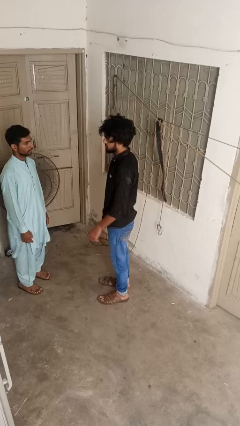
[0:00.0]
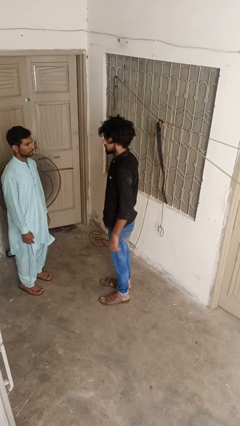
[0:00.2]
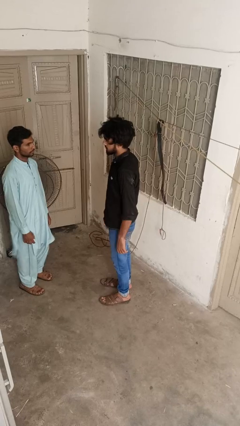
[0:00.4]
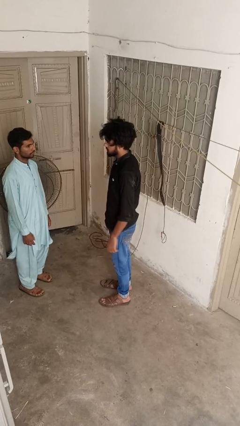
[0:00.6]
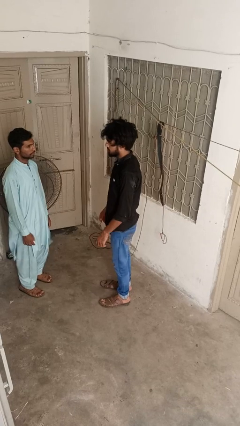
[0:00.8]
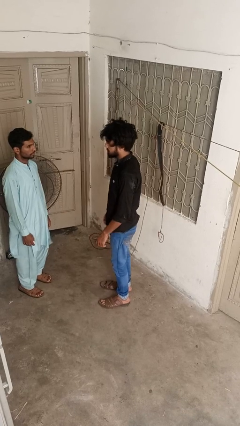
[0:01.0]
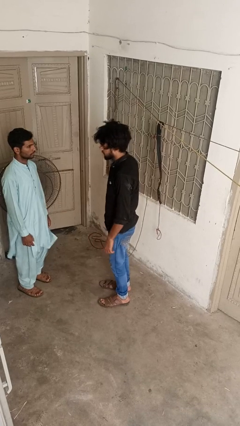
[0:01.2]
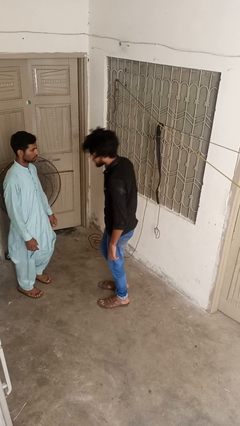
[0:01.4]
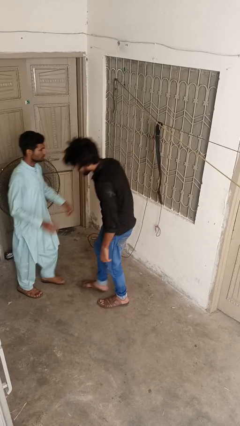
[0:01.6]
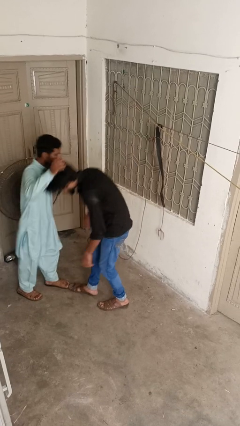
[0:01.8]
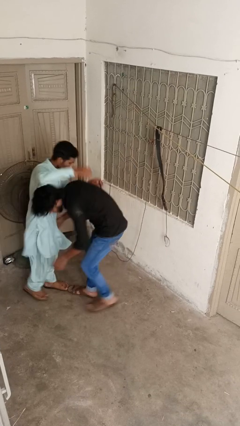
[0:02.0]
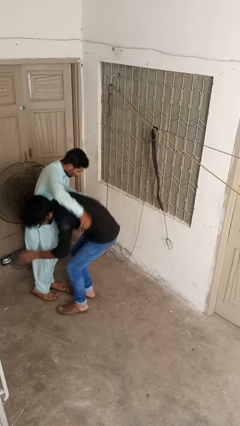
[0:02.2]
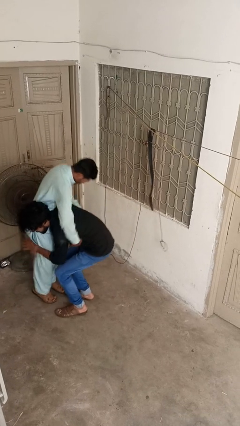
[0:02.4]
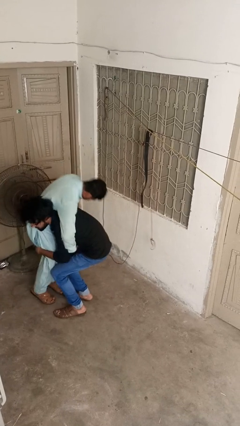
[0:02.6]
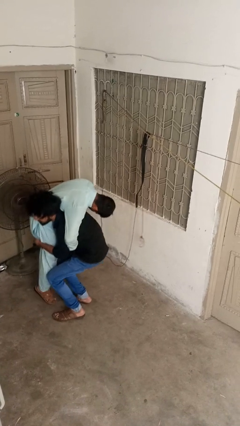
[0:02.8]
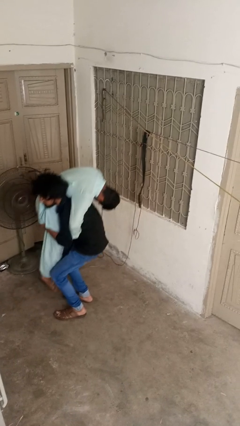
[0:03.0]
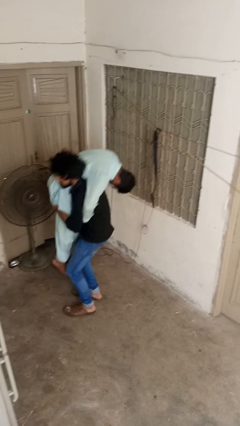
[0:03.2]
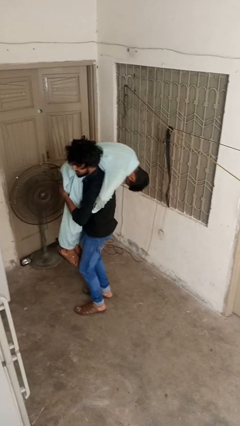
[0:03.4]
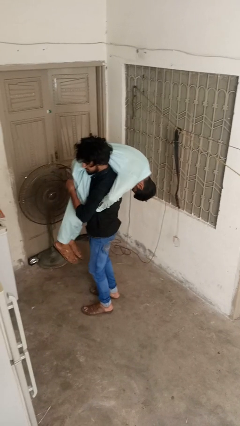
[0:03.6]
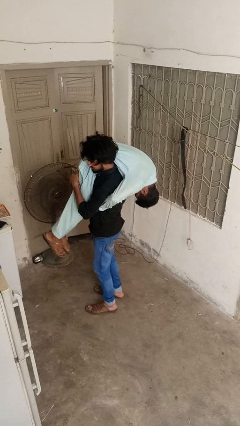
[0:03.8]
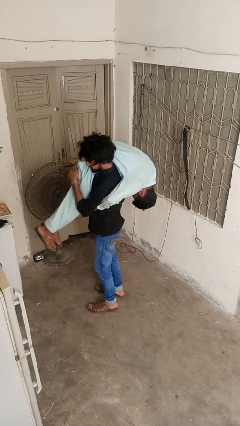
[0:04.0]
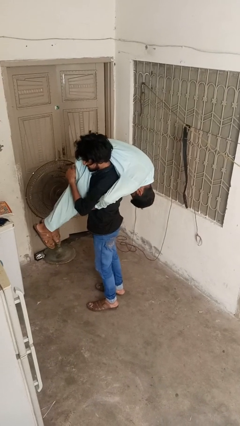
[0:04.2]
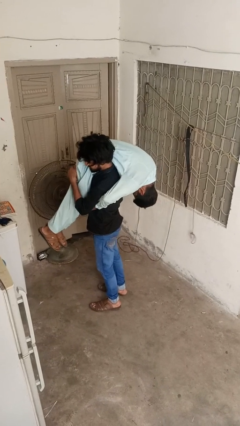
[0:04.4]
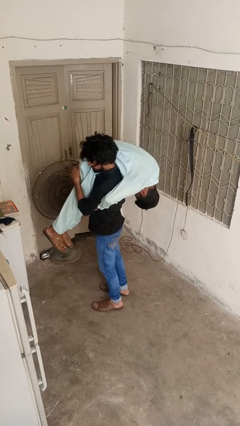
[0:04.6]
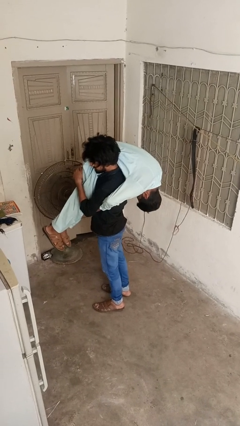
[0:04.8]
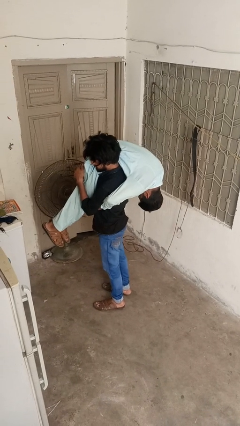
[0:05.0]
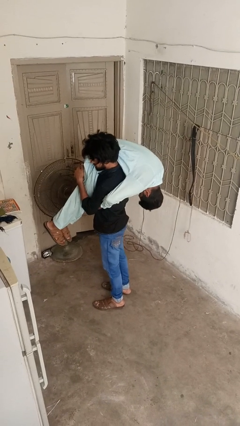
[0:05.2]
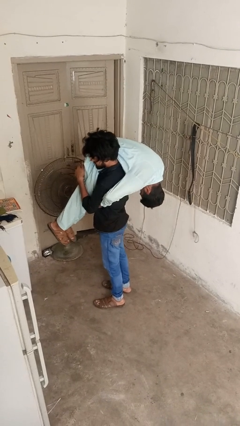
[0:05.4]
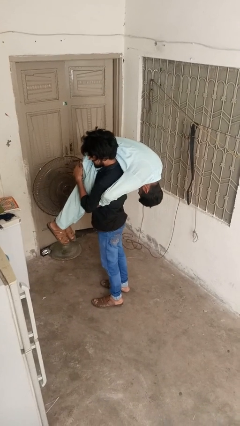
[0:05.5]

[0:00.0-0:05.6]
person carries person over shoulder

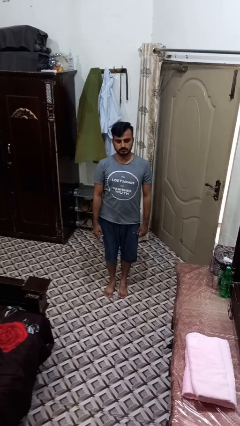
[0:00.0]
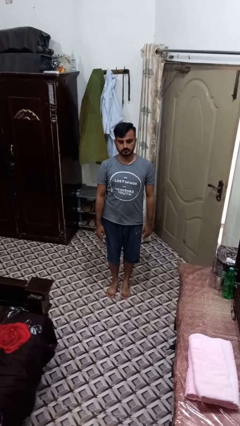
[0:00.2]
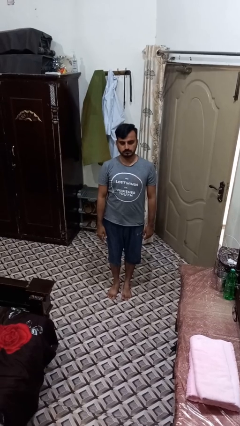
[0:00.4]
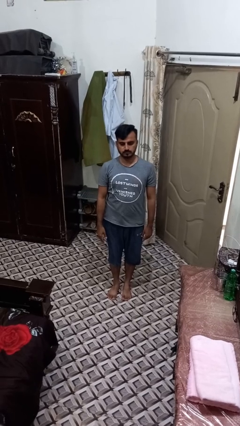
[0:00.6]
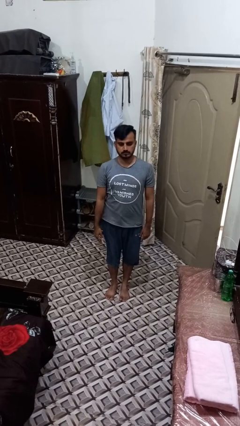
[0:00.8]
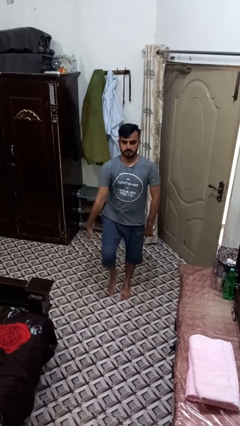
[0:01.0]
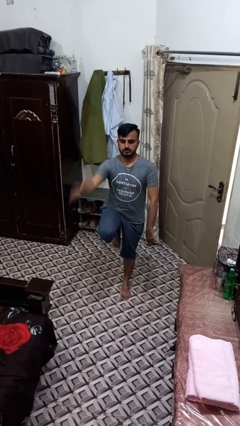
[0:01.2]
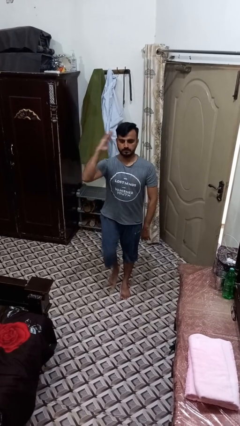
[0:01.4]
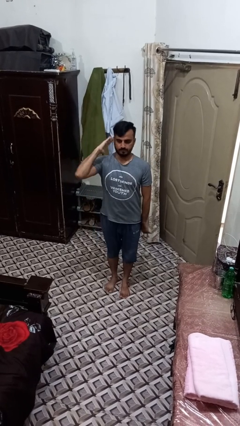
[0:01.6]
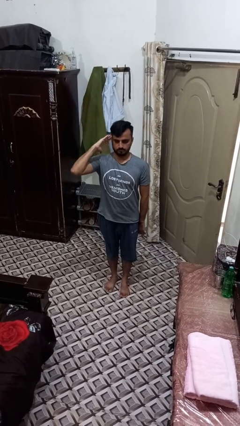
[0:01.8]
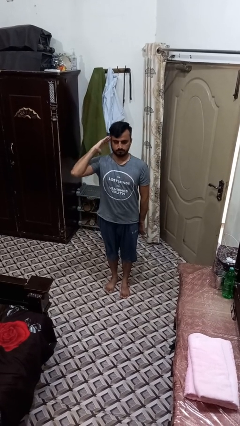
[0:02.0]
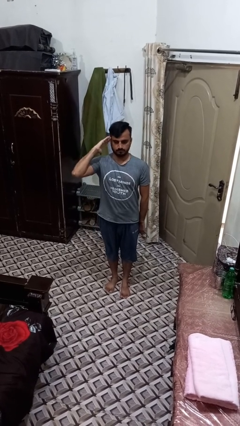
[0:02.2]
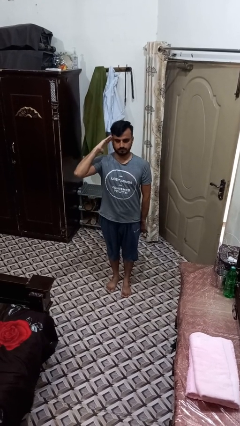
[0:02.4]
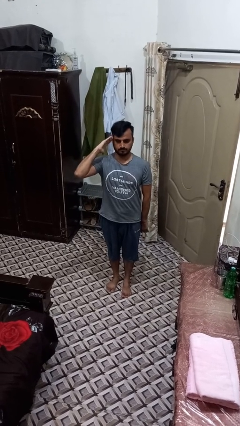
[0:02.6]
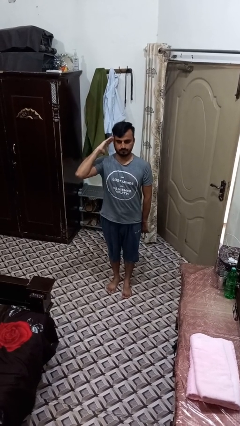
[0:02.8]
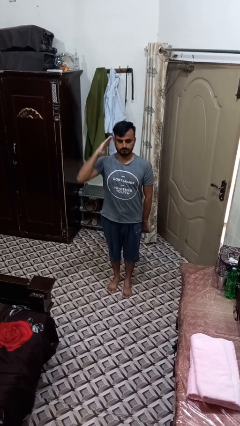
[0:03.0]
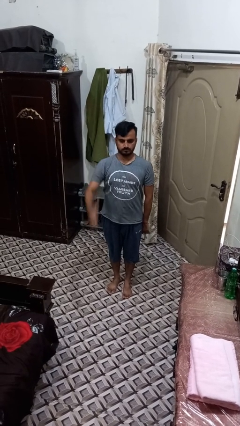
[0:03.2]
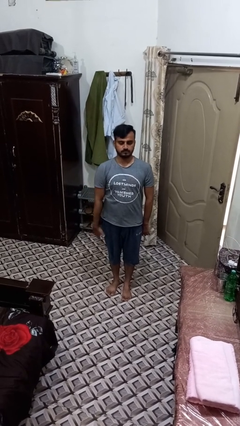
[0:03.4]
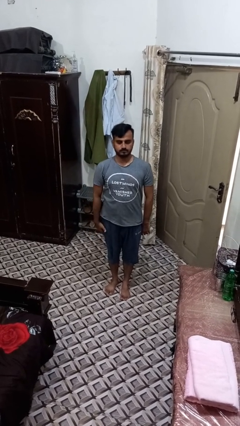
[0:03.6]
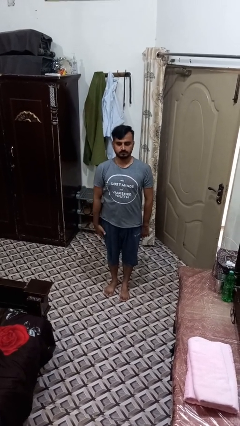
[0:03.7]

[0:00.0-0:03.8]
person salutes

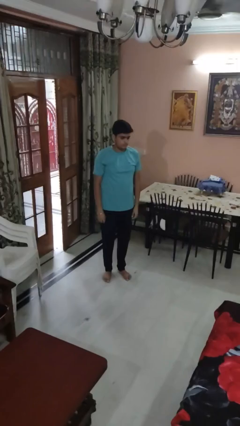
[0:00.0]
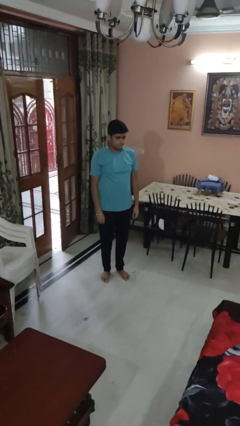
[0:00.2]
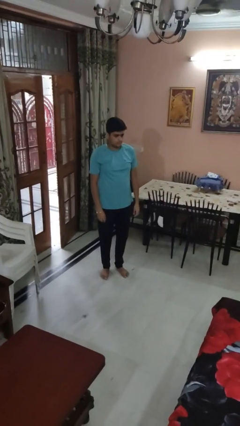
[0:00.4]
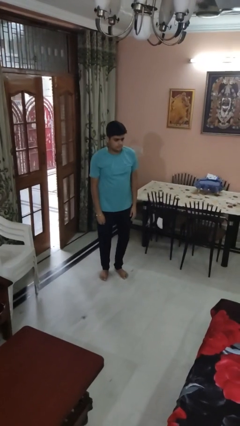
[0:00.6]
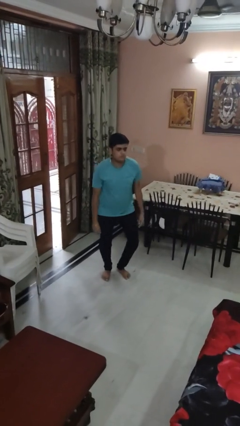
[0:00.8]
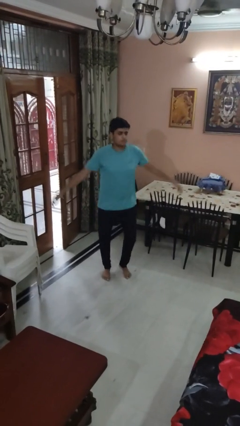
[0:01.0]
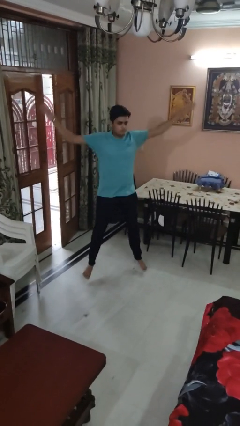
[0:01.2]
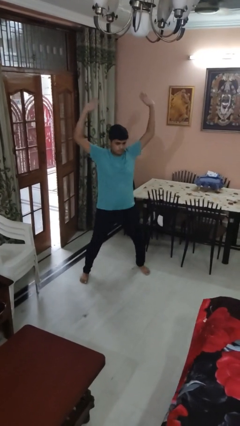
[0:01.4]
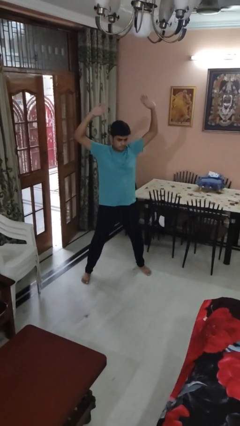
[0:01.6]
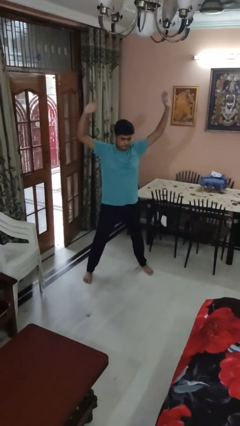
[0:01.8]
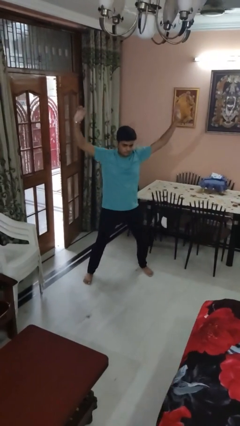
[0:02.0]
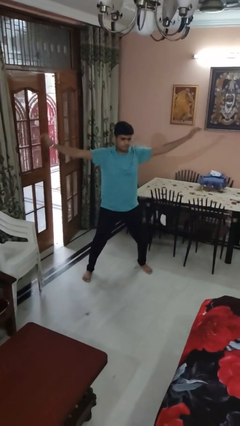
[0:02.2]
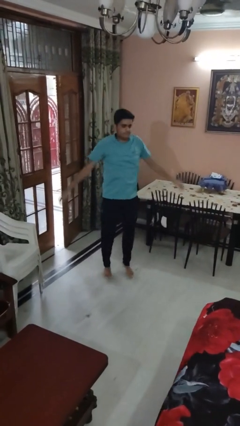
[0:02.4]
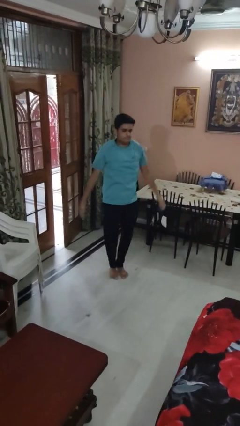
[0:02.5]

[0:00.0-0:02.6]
person exercises with jumping jacks

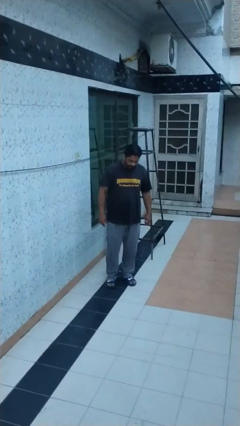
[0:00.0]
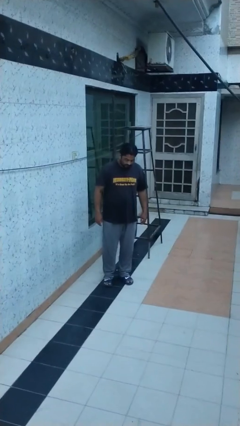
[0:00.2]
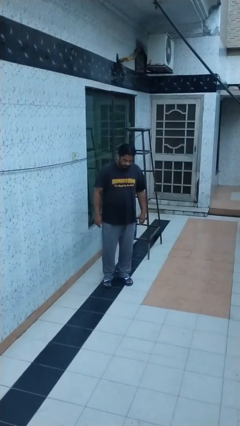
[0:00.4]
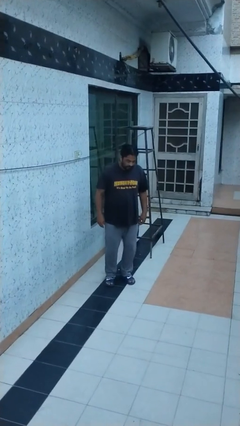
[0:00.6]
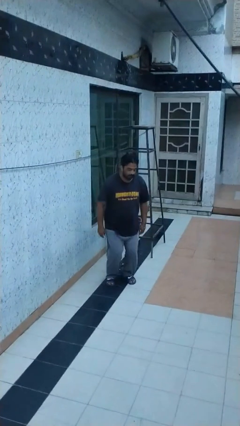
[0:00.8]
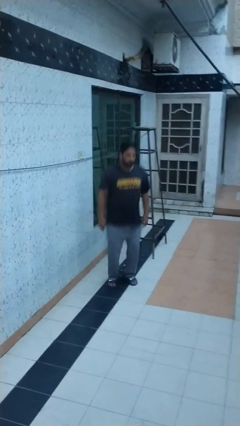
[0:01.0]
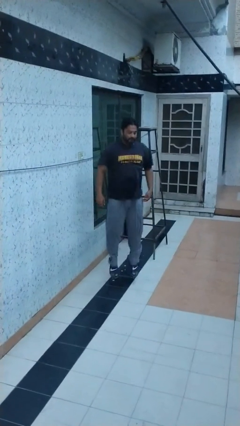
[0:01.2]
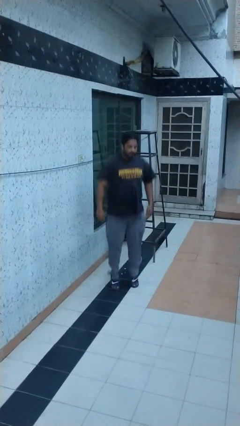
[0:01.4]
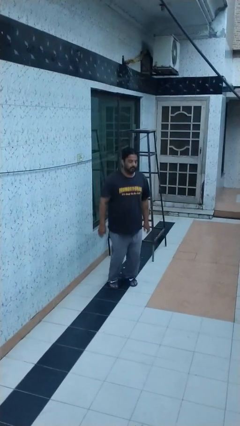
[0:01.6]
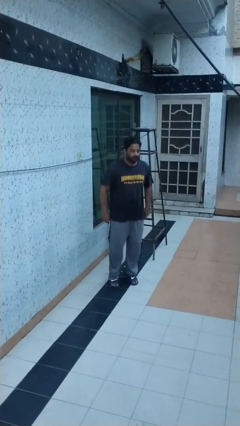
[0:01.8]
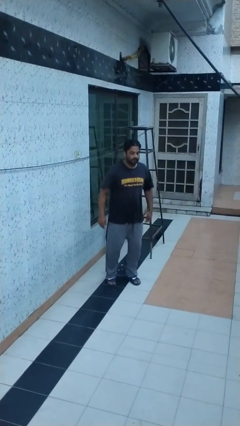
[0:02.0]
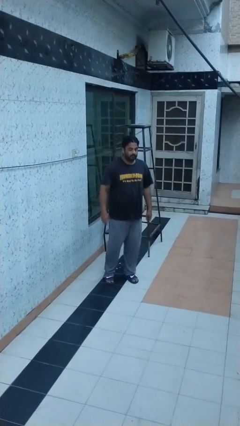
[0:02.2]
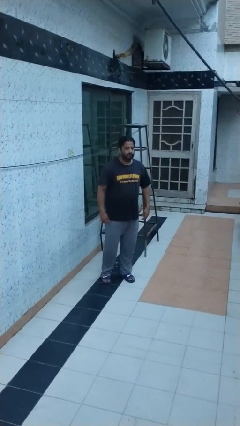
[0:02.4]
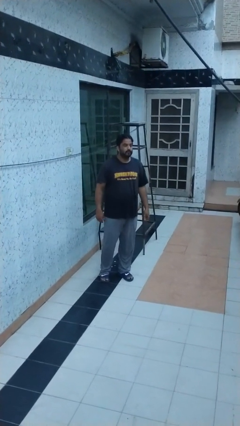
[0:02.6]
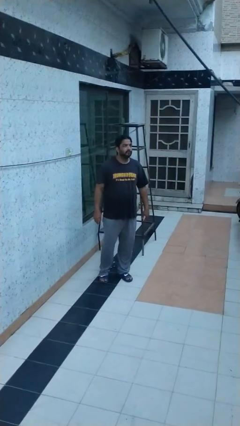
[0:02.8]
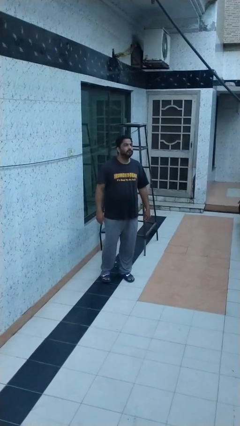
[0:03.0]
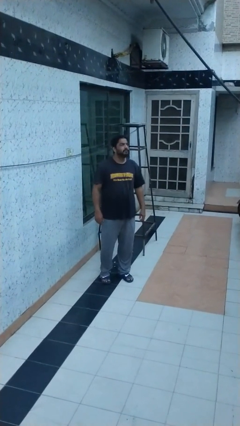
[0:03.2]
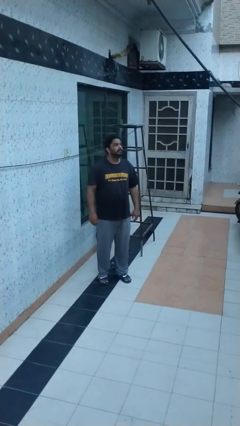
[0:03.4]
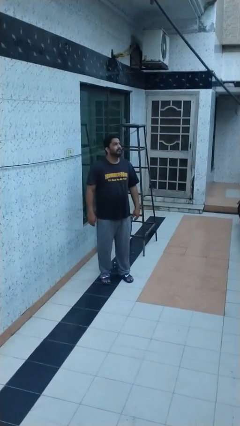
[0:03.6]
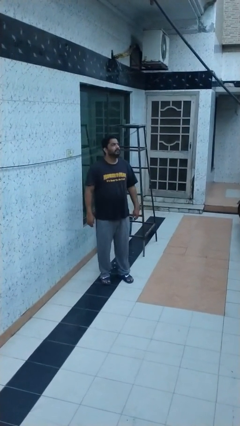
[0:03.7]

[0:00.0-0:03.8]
person jumps

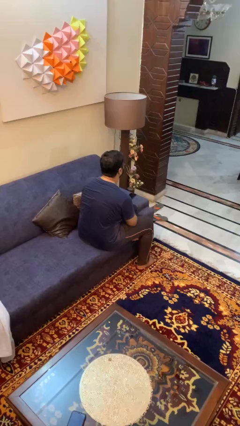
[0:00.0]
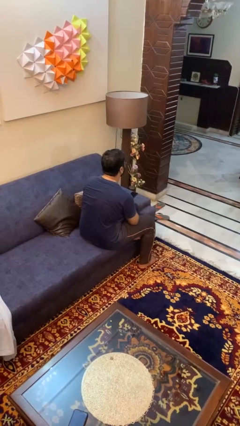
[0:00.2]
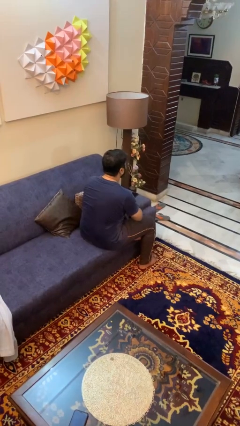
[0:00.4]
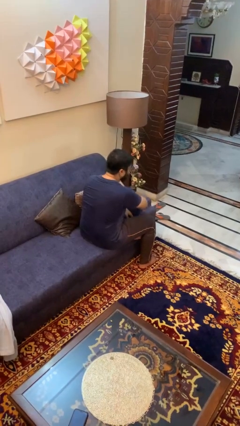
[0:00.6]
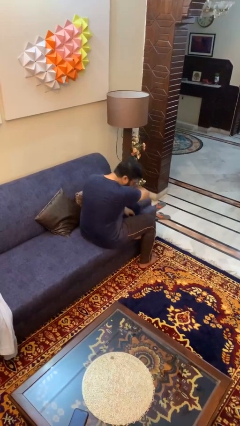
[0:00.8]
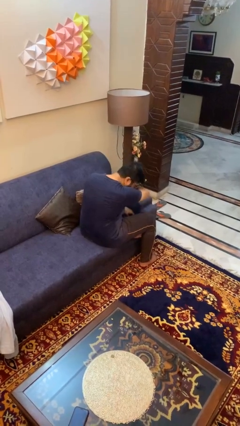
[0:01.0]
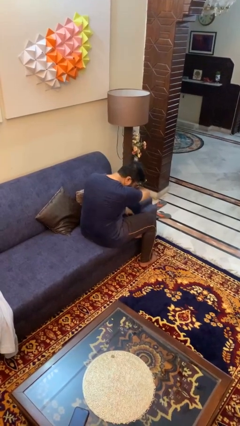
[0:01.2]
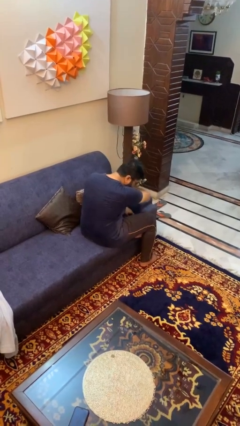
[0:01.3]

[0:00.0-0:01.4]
person sneezes into arm

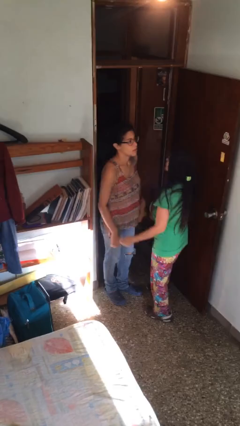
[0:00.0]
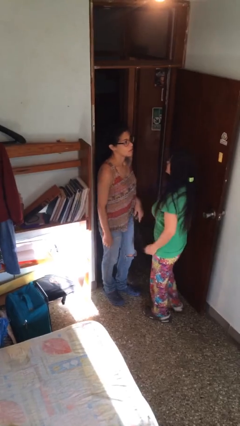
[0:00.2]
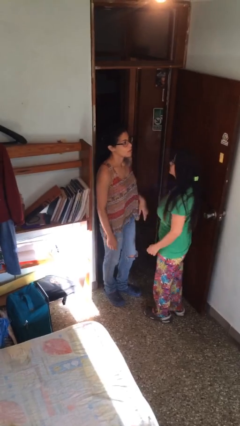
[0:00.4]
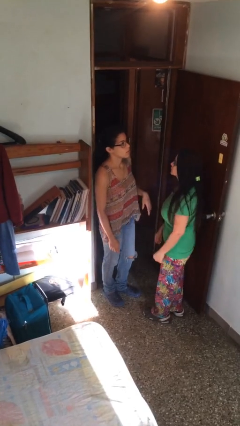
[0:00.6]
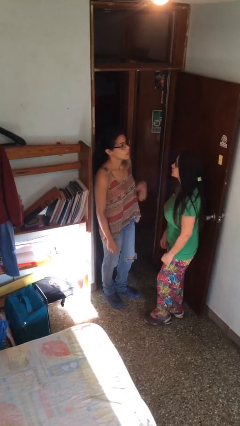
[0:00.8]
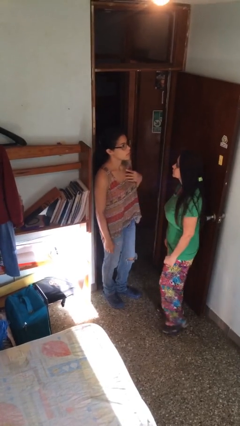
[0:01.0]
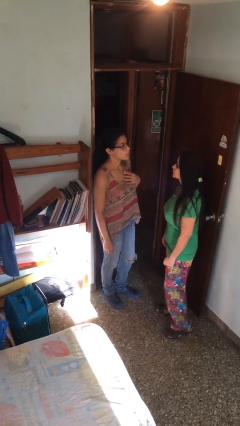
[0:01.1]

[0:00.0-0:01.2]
person talks to person
